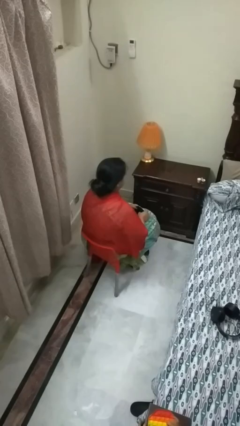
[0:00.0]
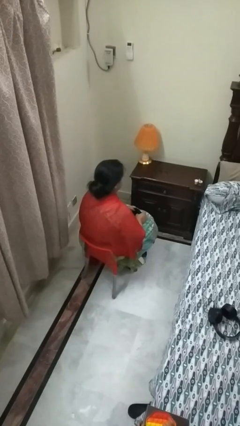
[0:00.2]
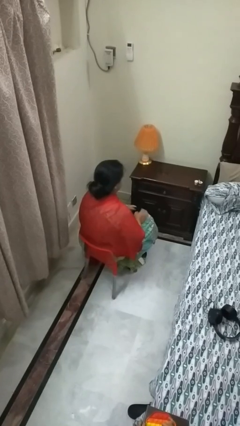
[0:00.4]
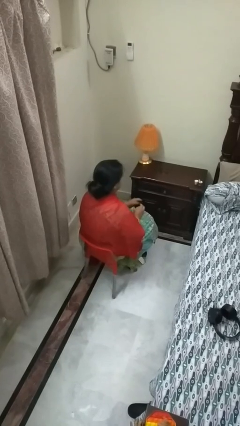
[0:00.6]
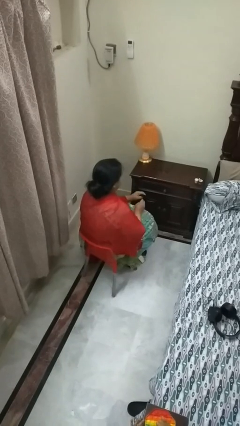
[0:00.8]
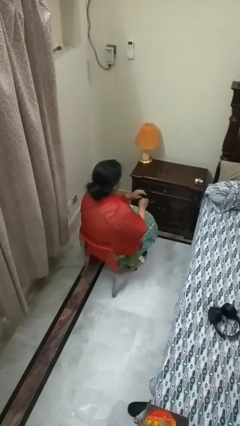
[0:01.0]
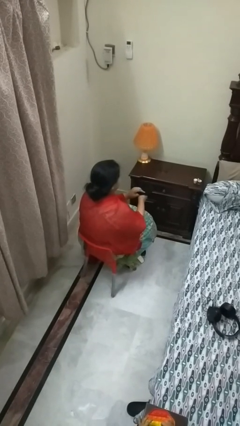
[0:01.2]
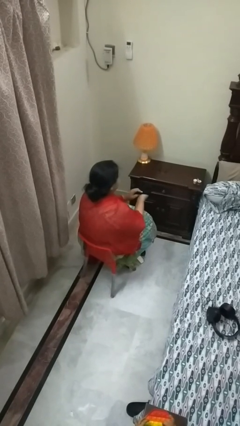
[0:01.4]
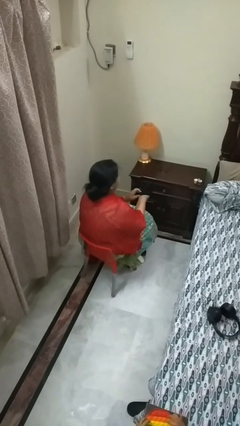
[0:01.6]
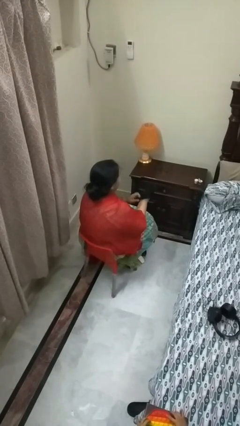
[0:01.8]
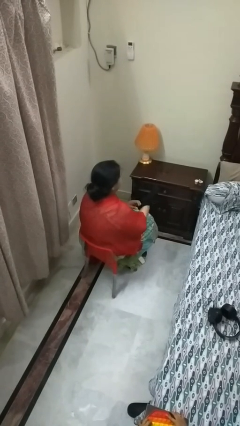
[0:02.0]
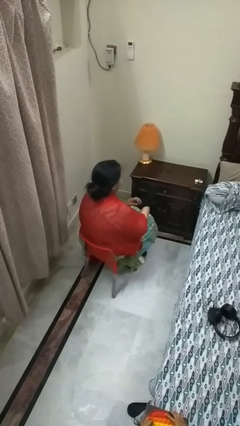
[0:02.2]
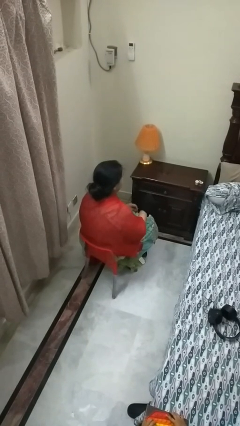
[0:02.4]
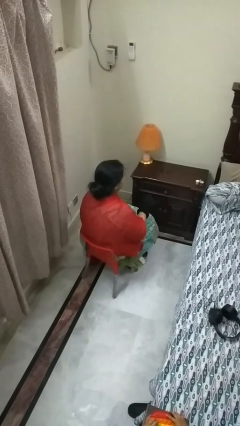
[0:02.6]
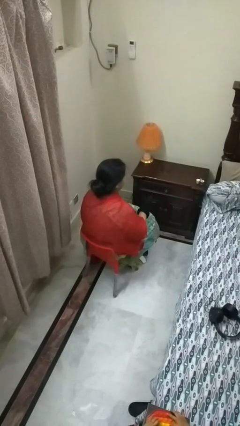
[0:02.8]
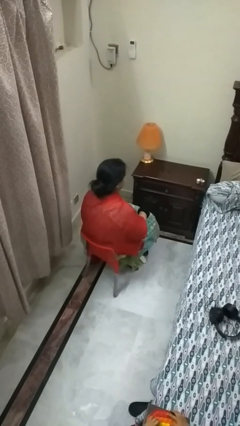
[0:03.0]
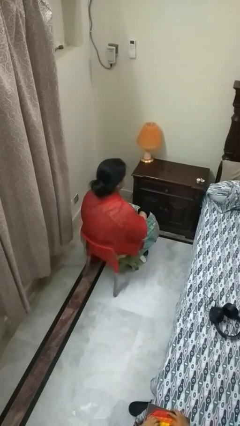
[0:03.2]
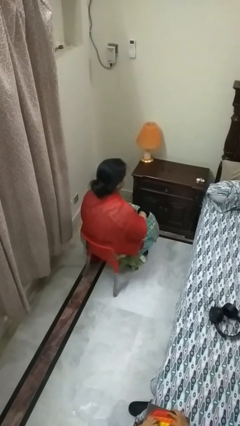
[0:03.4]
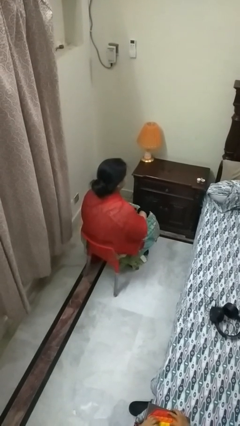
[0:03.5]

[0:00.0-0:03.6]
person puts on gloves

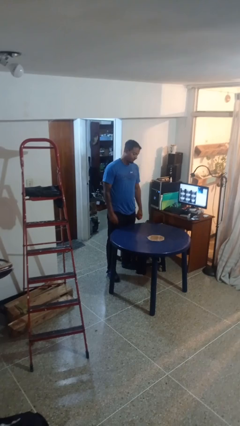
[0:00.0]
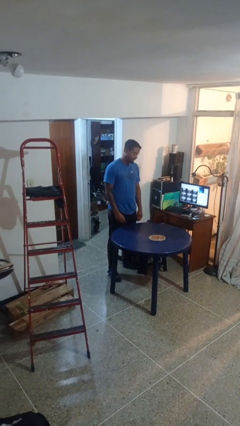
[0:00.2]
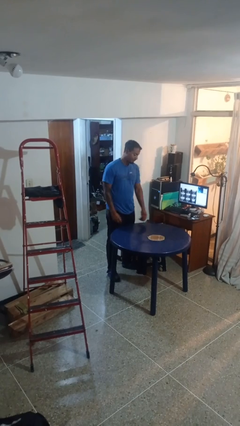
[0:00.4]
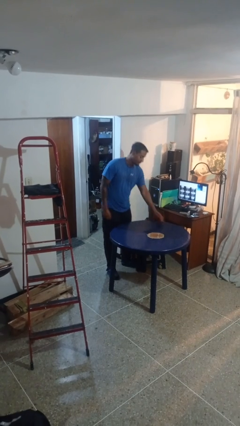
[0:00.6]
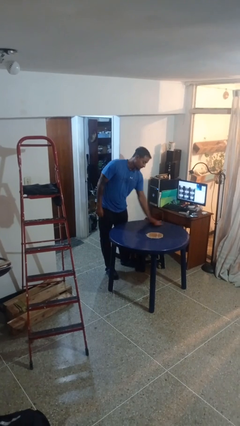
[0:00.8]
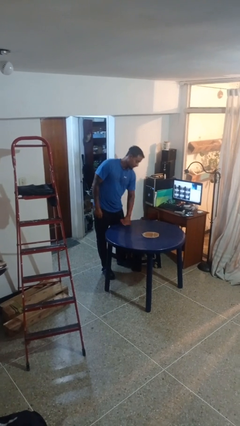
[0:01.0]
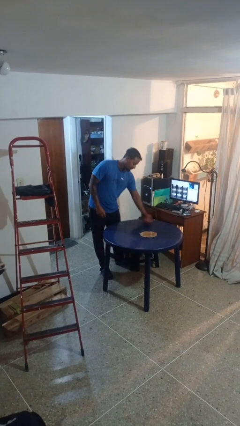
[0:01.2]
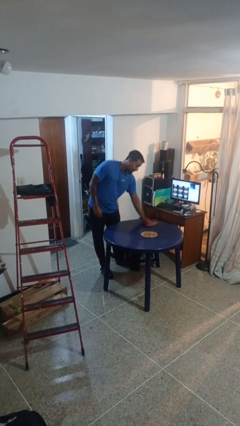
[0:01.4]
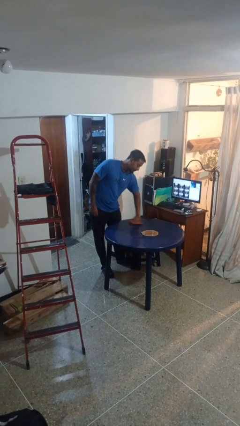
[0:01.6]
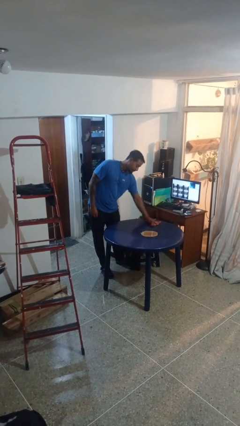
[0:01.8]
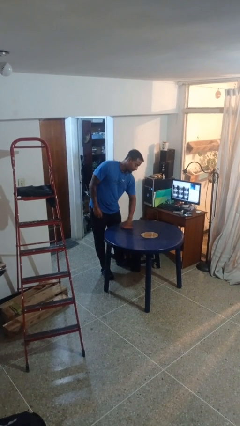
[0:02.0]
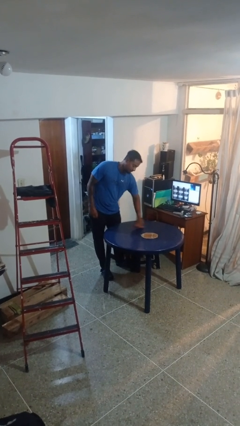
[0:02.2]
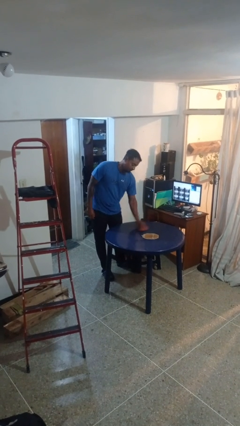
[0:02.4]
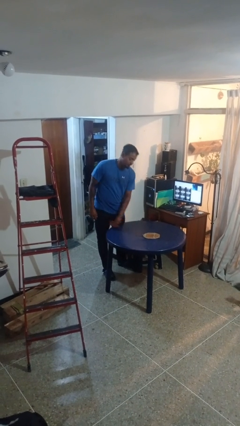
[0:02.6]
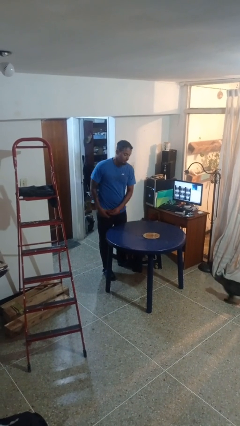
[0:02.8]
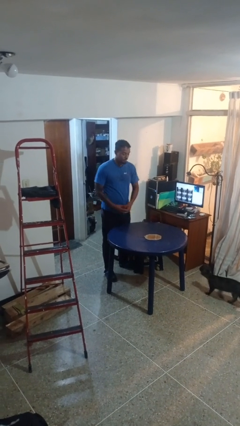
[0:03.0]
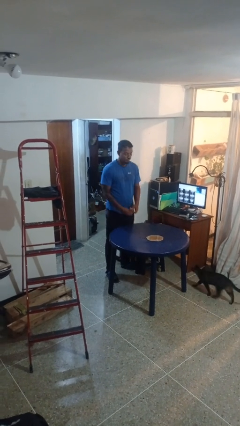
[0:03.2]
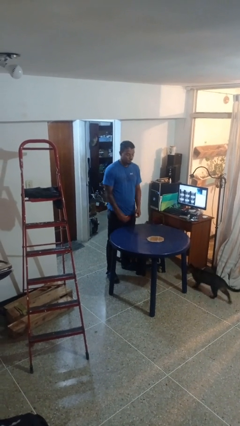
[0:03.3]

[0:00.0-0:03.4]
person cleans table with rag

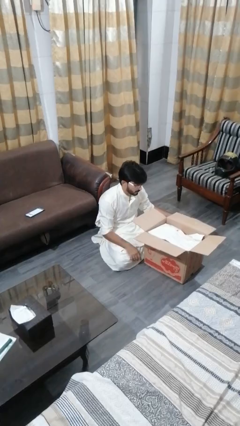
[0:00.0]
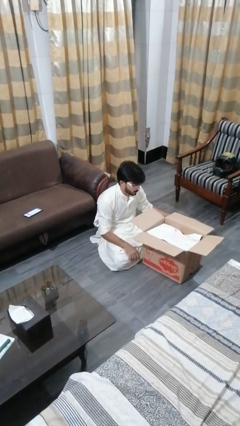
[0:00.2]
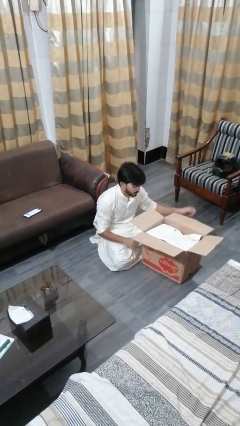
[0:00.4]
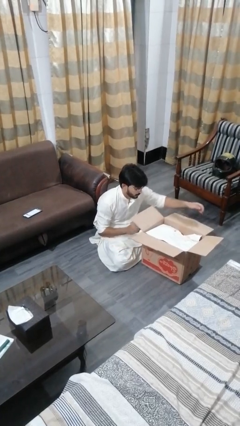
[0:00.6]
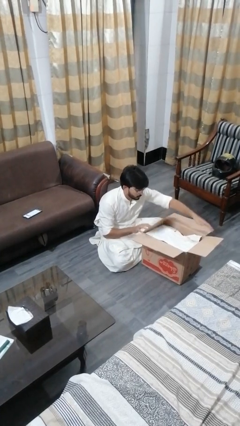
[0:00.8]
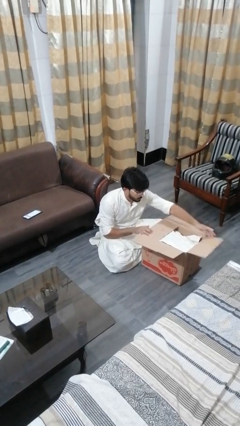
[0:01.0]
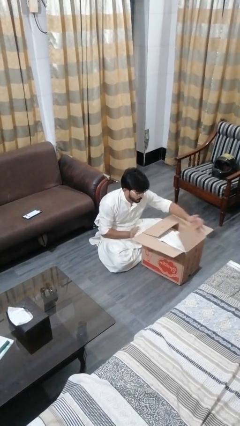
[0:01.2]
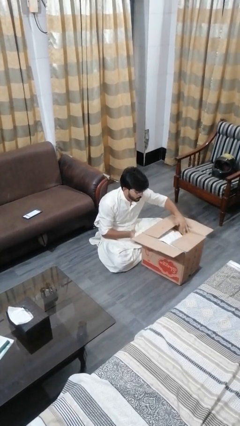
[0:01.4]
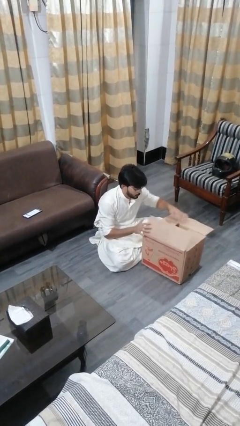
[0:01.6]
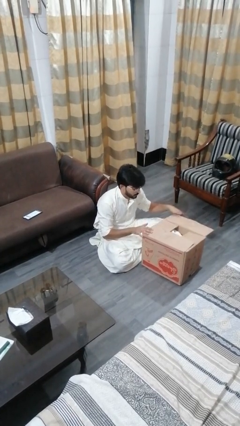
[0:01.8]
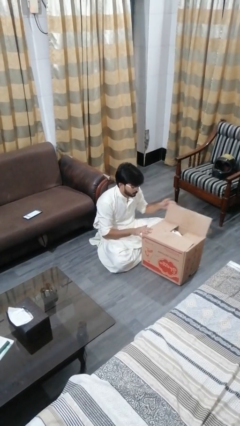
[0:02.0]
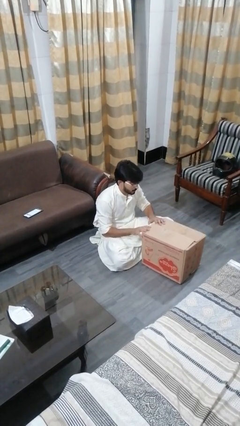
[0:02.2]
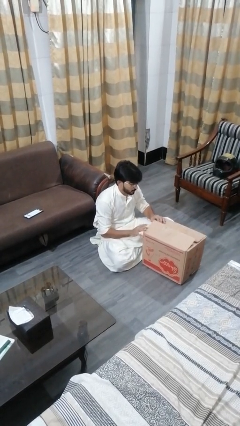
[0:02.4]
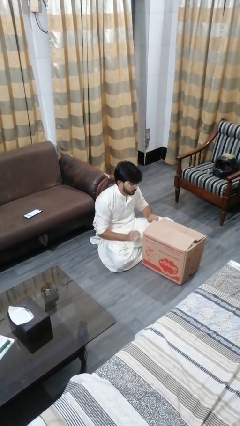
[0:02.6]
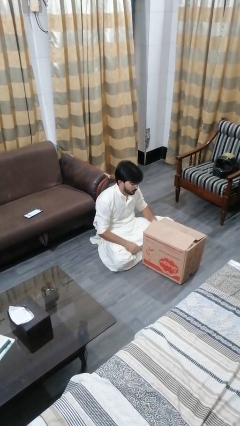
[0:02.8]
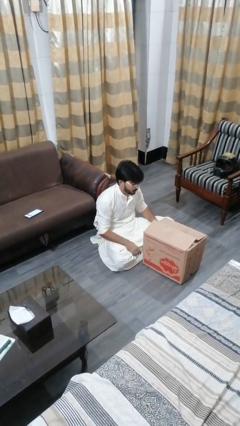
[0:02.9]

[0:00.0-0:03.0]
person closes box

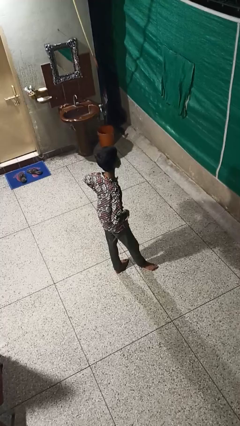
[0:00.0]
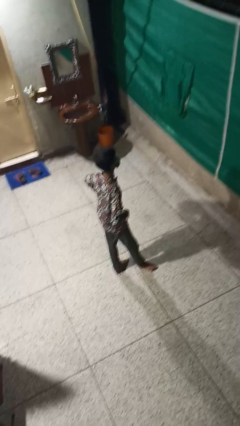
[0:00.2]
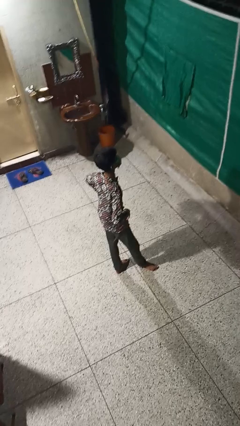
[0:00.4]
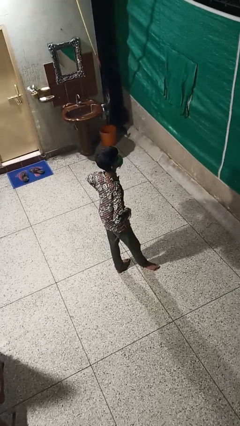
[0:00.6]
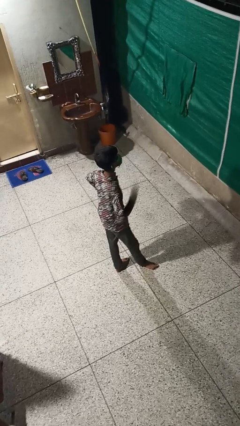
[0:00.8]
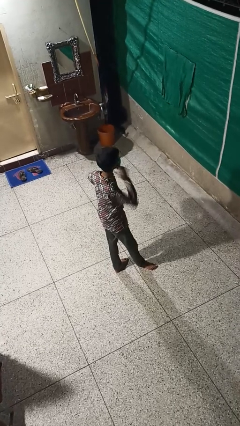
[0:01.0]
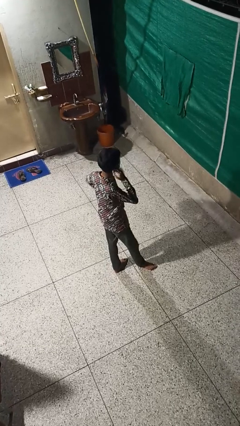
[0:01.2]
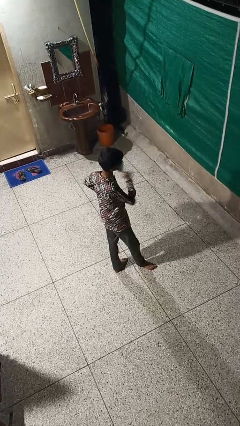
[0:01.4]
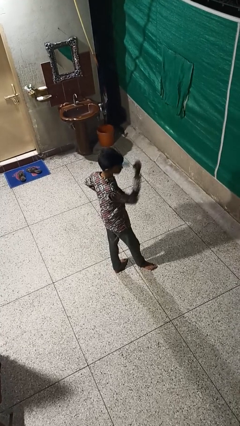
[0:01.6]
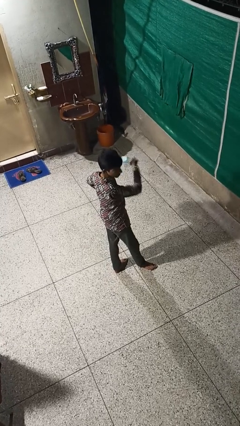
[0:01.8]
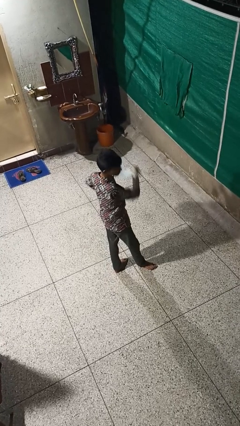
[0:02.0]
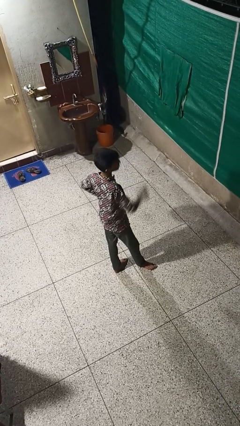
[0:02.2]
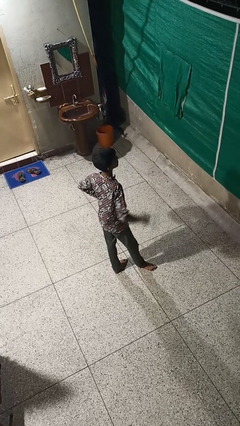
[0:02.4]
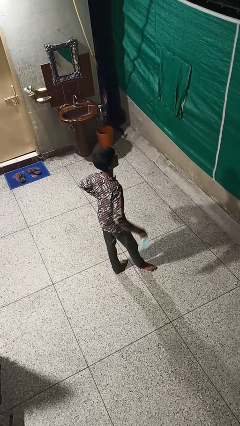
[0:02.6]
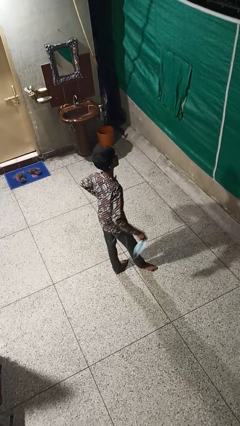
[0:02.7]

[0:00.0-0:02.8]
person takes off facemask

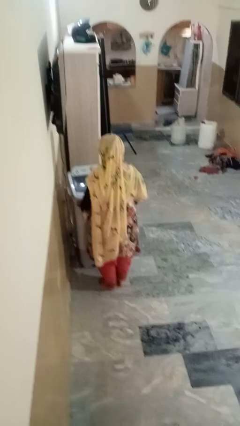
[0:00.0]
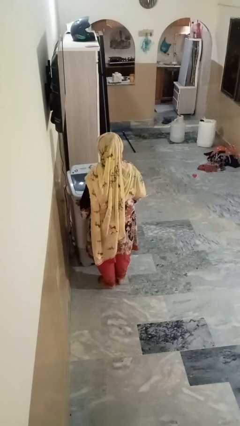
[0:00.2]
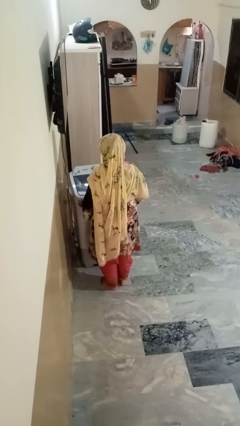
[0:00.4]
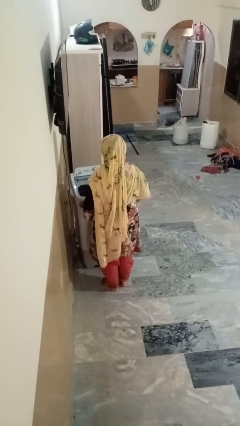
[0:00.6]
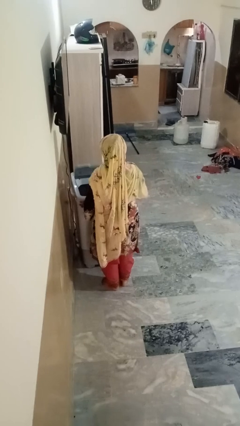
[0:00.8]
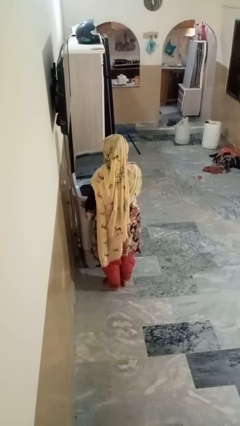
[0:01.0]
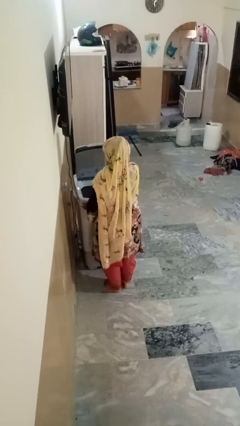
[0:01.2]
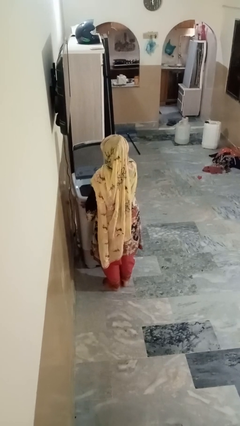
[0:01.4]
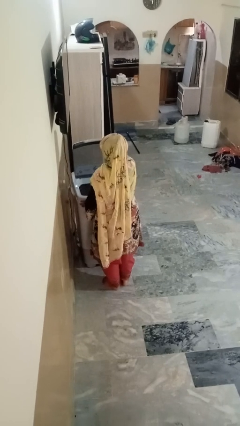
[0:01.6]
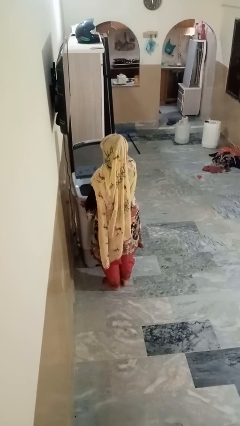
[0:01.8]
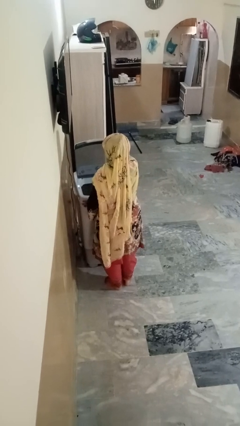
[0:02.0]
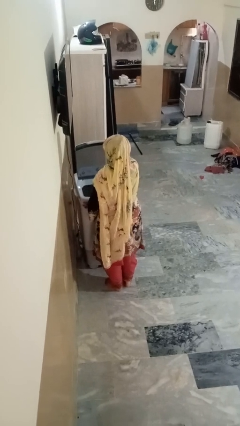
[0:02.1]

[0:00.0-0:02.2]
person opens clothes washer

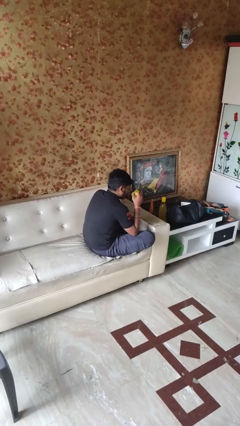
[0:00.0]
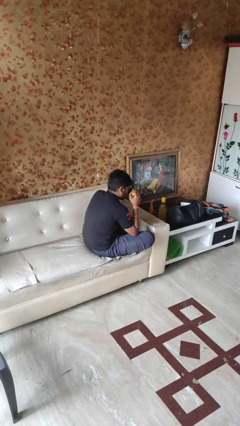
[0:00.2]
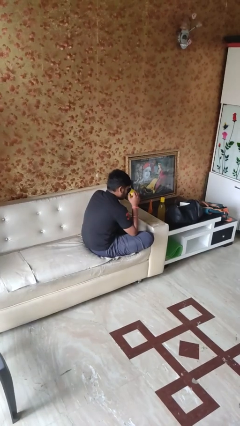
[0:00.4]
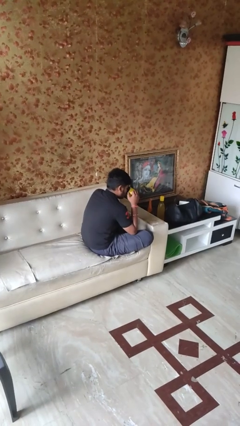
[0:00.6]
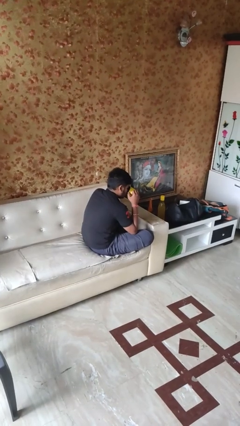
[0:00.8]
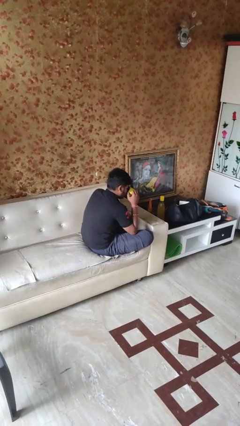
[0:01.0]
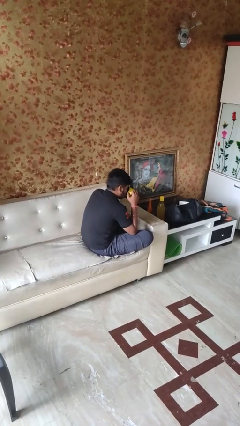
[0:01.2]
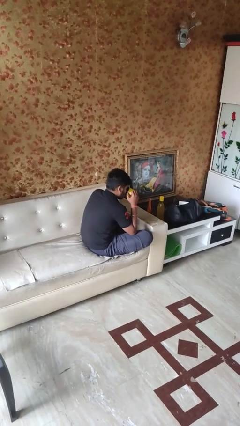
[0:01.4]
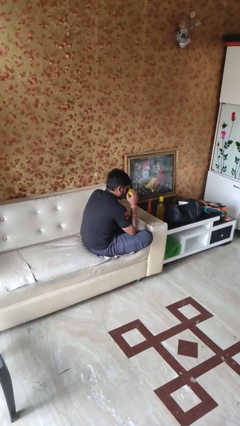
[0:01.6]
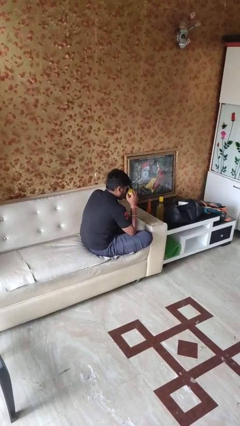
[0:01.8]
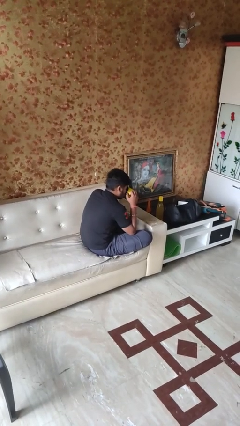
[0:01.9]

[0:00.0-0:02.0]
person drinks from mug
